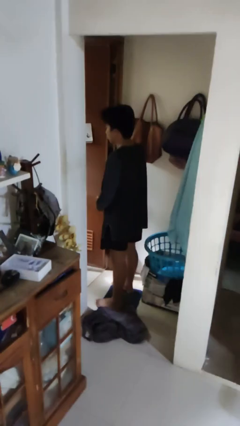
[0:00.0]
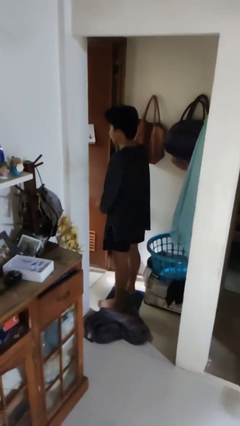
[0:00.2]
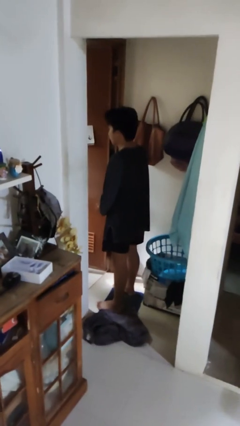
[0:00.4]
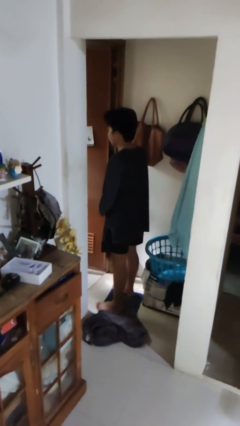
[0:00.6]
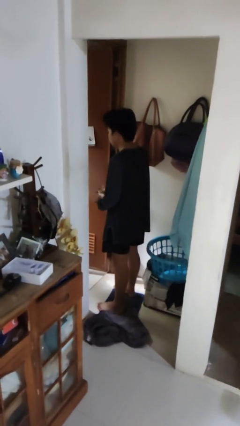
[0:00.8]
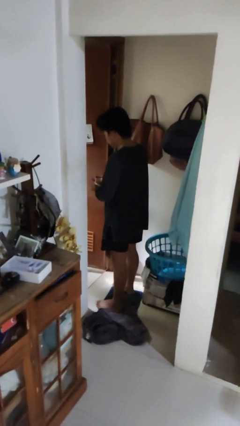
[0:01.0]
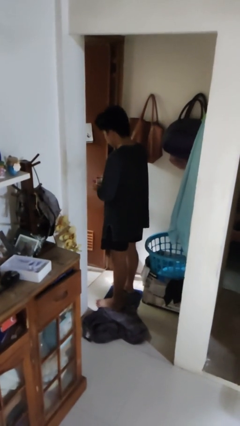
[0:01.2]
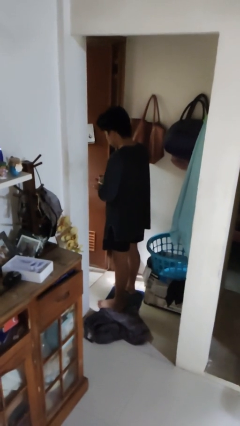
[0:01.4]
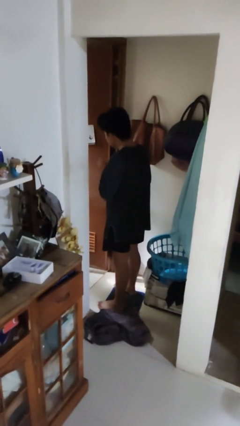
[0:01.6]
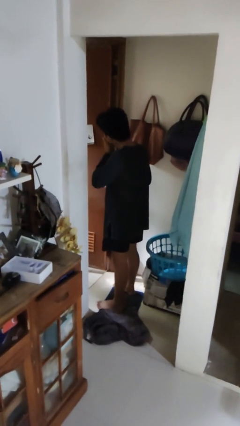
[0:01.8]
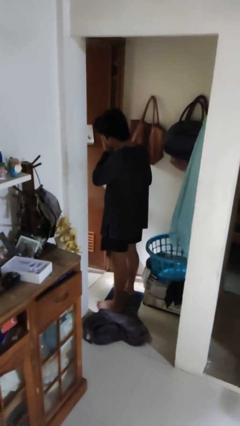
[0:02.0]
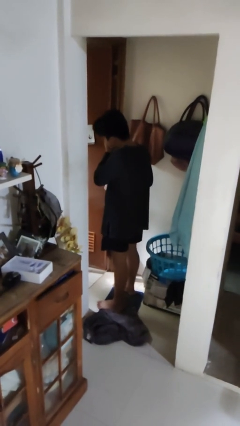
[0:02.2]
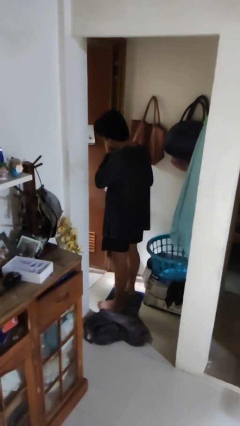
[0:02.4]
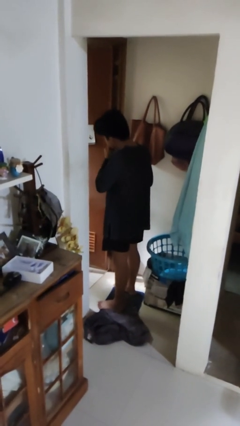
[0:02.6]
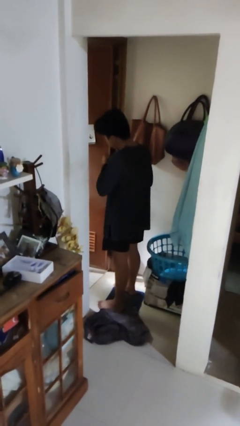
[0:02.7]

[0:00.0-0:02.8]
person applies shaving cream

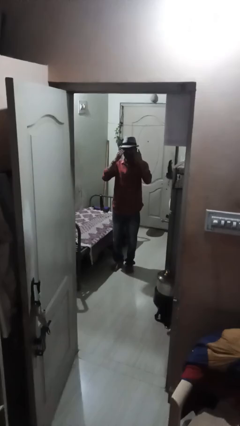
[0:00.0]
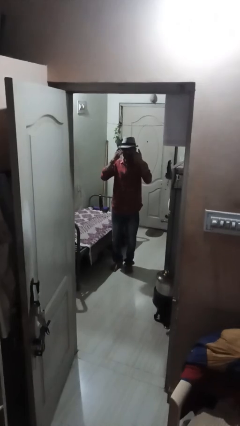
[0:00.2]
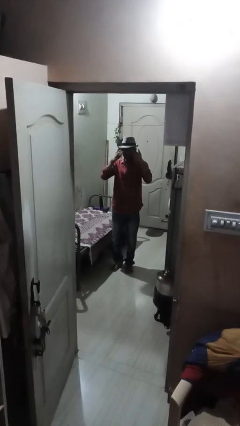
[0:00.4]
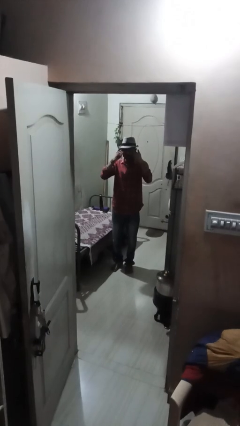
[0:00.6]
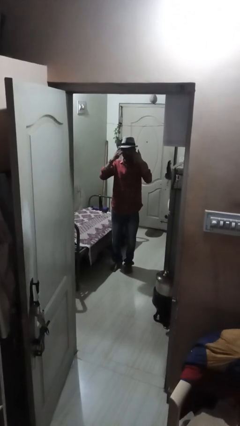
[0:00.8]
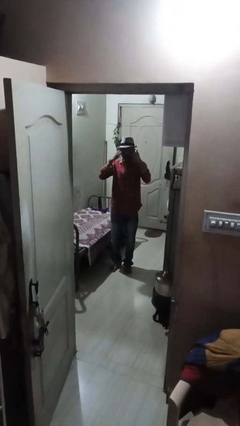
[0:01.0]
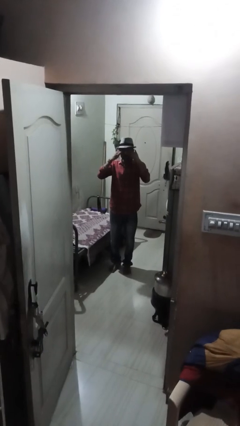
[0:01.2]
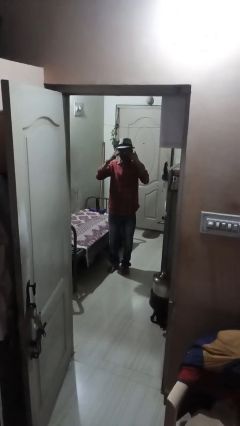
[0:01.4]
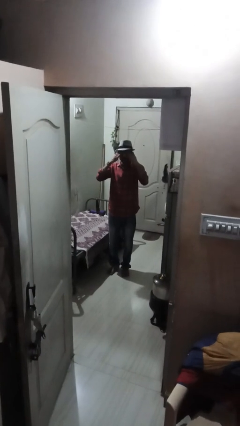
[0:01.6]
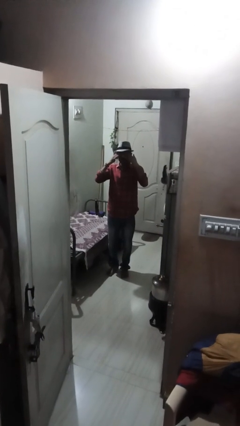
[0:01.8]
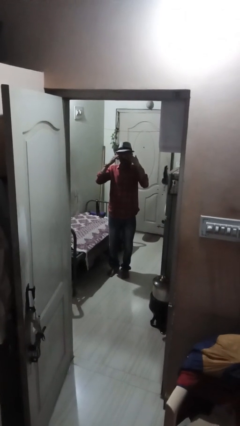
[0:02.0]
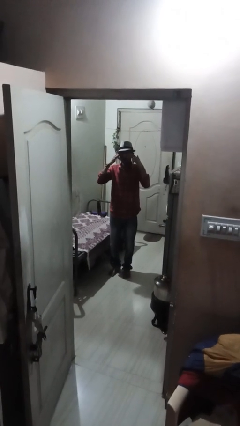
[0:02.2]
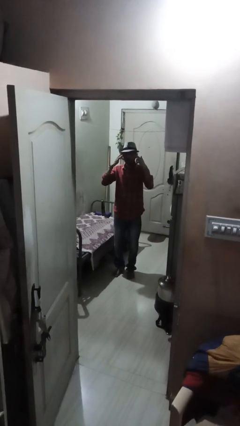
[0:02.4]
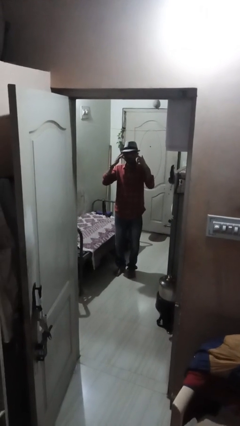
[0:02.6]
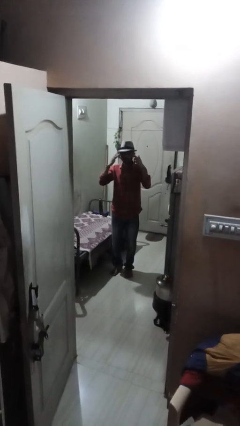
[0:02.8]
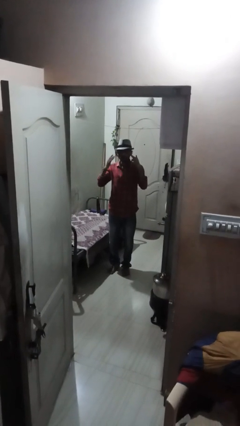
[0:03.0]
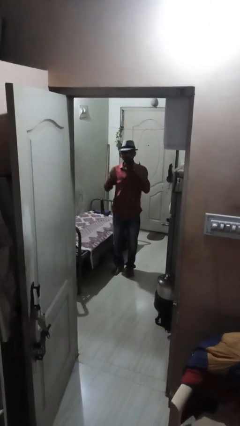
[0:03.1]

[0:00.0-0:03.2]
person rubs eyes

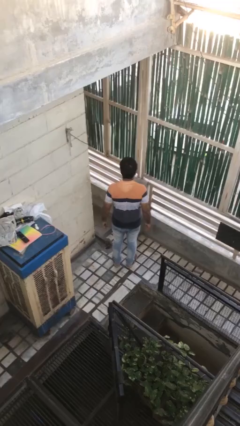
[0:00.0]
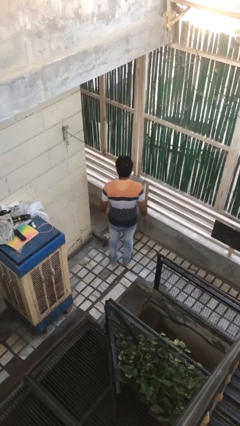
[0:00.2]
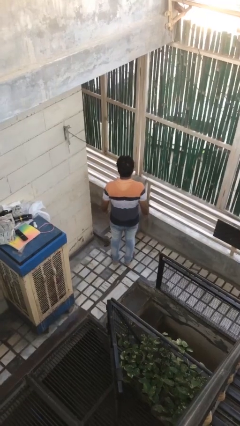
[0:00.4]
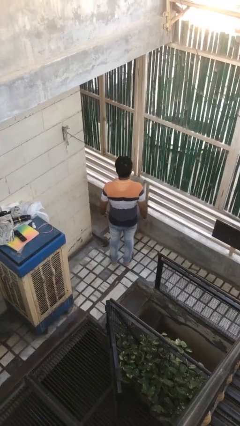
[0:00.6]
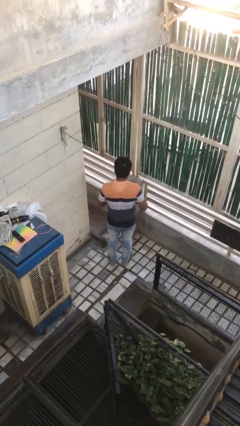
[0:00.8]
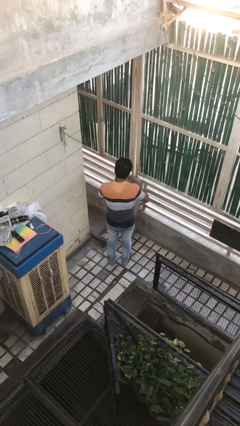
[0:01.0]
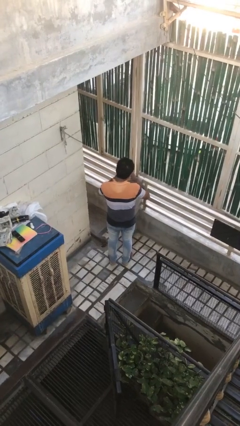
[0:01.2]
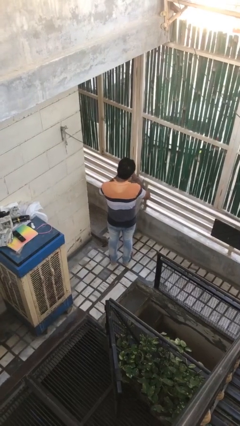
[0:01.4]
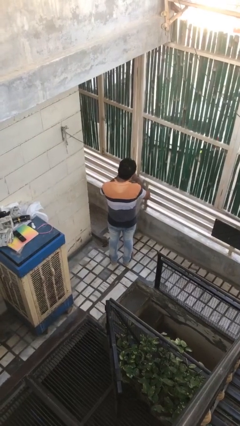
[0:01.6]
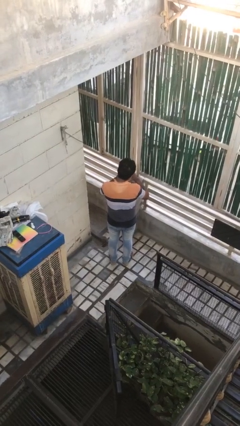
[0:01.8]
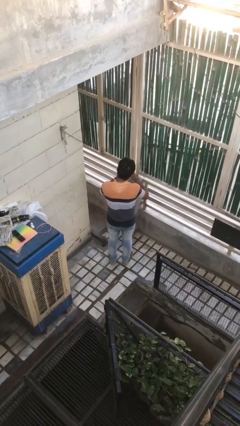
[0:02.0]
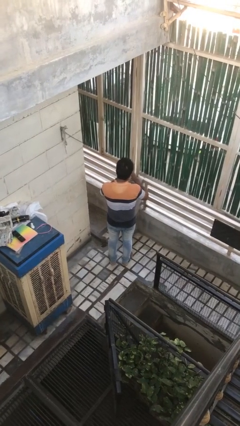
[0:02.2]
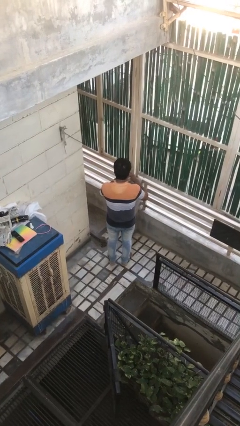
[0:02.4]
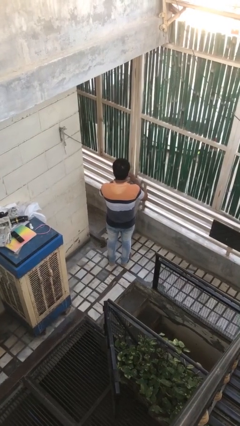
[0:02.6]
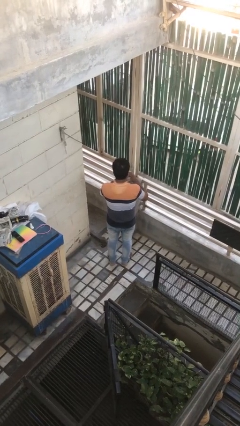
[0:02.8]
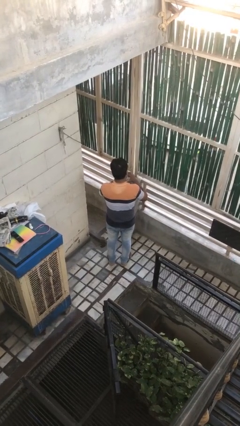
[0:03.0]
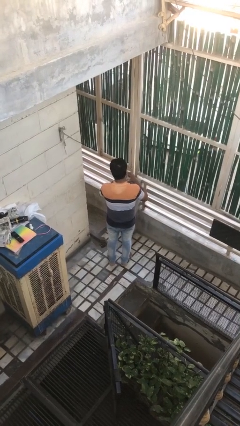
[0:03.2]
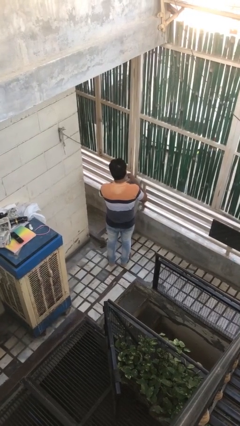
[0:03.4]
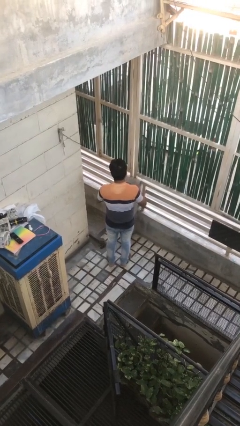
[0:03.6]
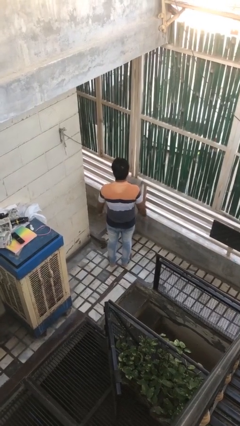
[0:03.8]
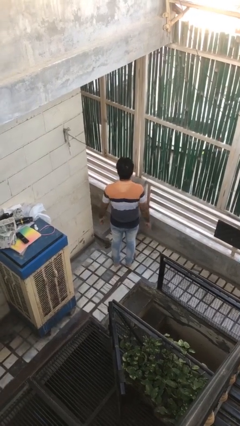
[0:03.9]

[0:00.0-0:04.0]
person files fingernails

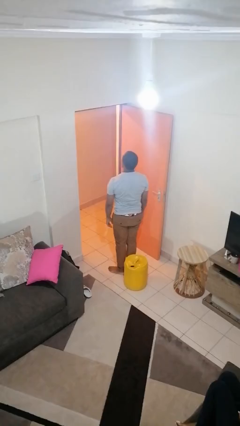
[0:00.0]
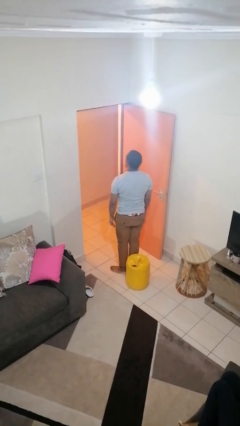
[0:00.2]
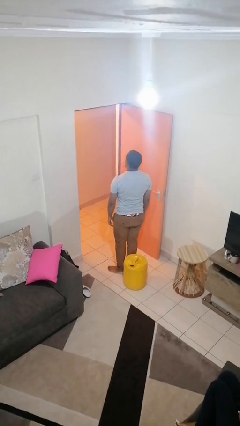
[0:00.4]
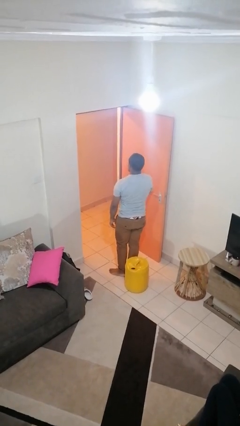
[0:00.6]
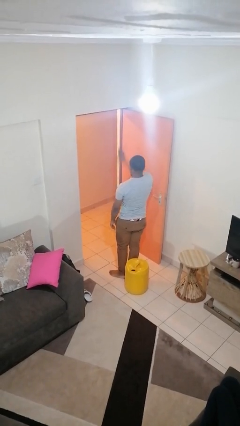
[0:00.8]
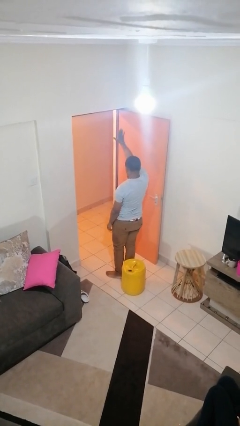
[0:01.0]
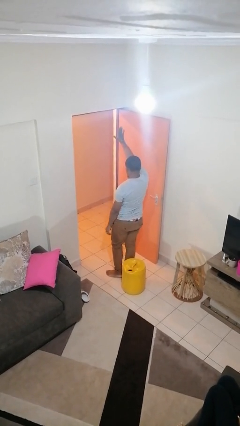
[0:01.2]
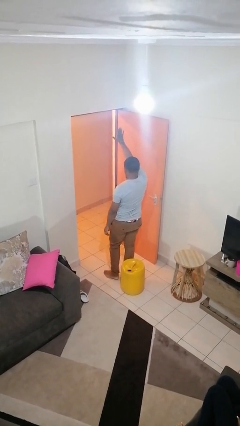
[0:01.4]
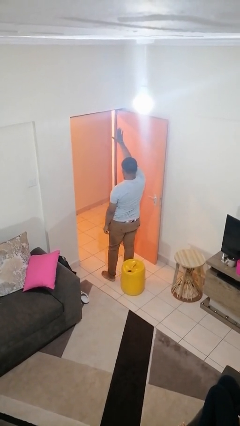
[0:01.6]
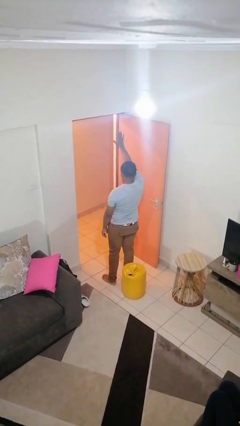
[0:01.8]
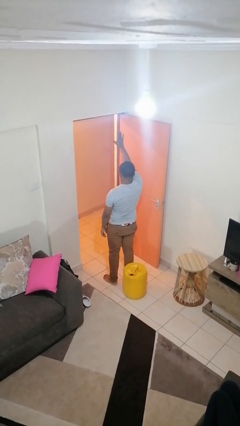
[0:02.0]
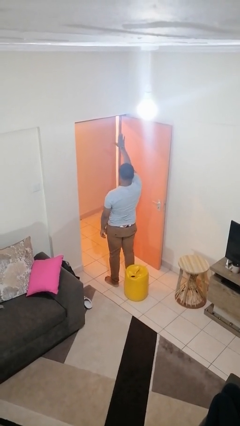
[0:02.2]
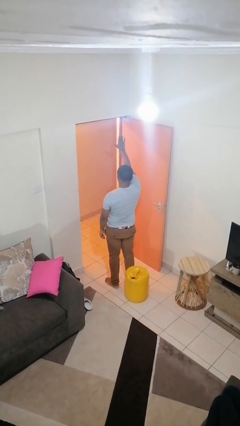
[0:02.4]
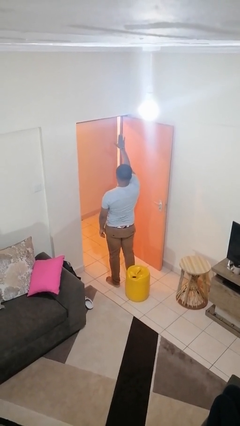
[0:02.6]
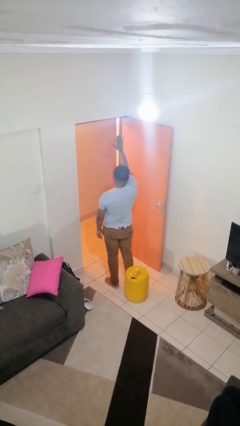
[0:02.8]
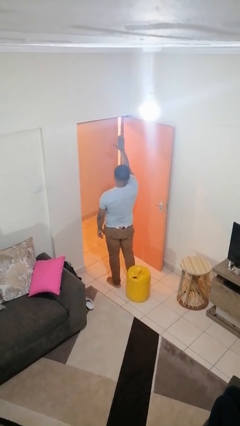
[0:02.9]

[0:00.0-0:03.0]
person gestures stop

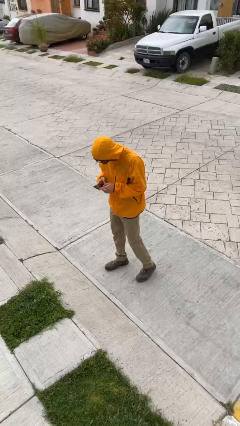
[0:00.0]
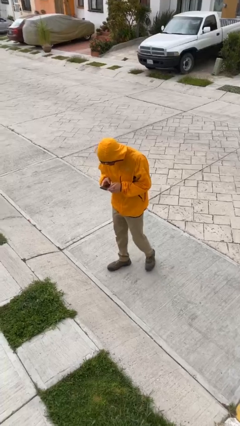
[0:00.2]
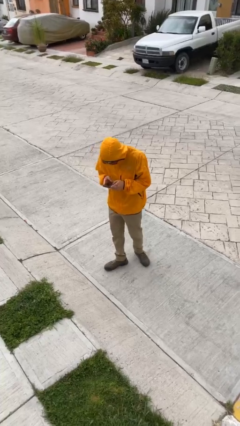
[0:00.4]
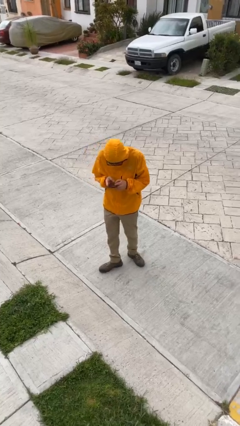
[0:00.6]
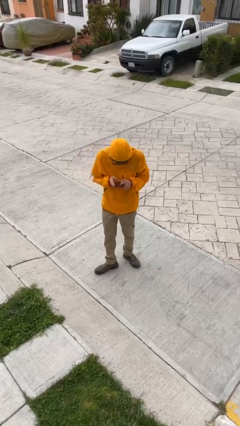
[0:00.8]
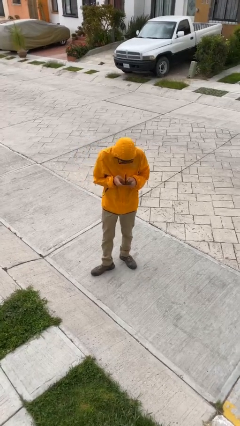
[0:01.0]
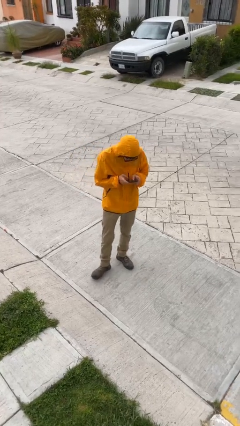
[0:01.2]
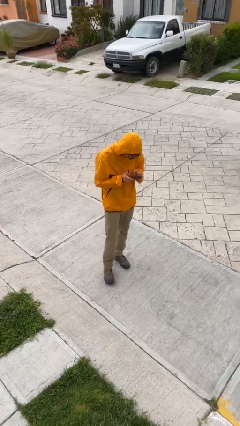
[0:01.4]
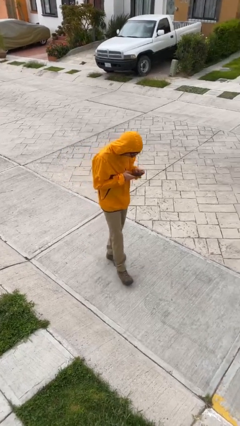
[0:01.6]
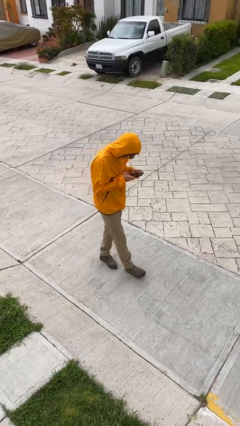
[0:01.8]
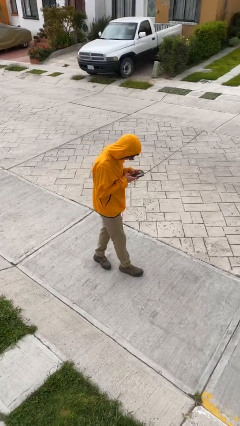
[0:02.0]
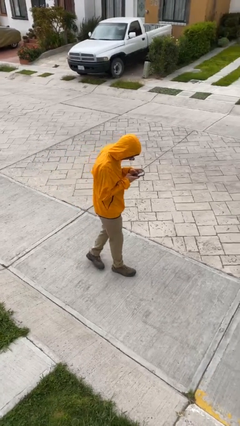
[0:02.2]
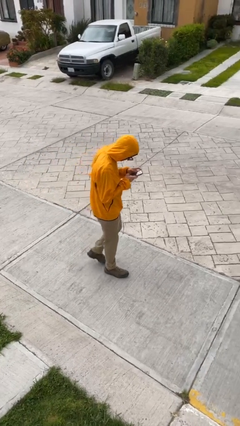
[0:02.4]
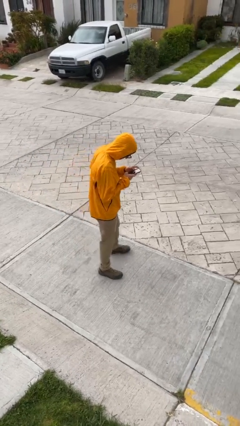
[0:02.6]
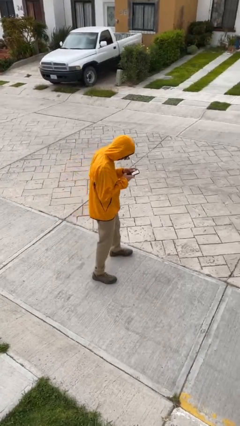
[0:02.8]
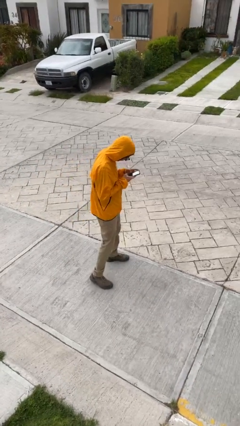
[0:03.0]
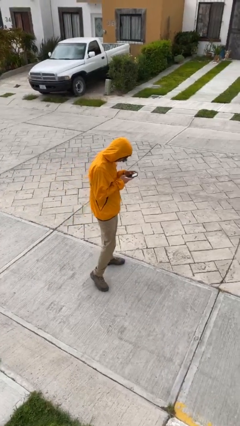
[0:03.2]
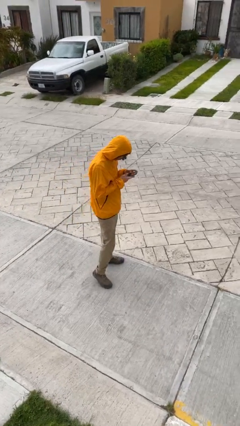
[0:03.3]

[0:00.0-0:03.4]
person texts on phone

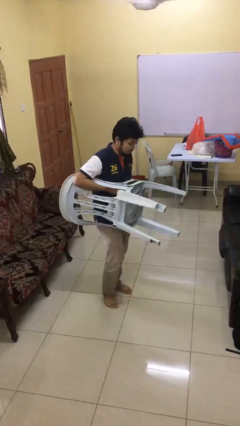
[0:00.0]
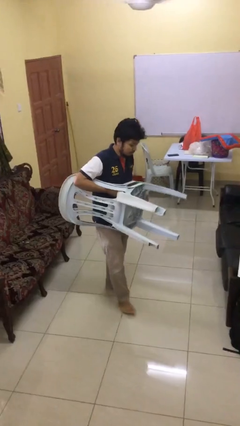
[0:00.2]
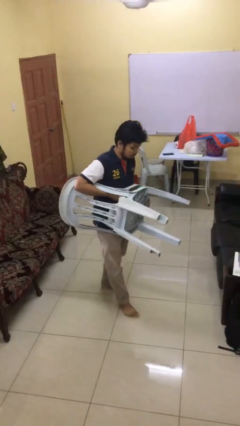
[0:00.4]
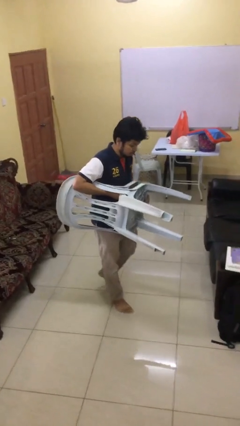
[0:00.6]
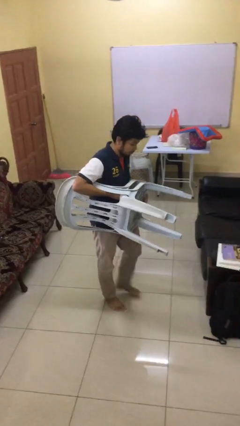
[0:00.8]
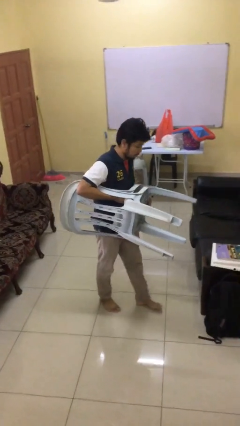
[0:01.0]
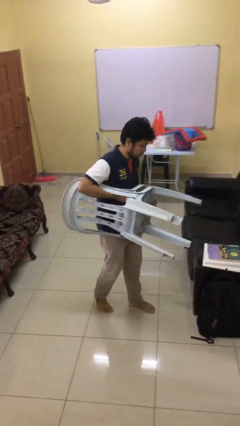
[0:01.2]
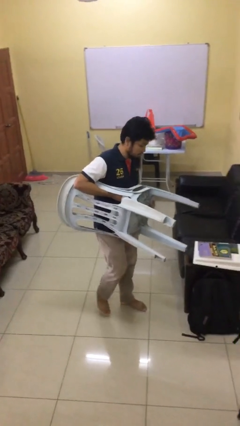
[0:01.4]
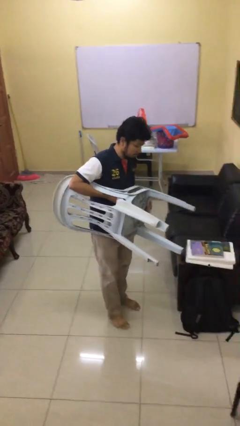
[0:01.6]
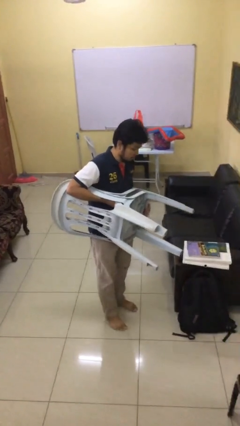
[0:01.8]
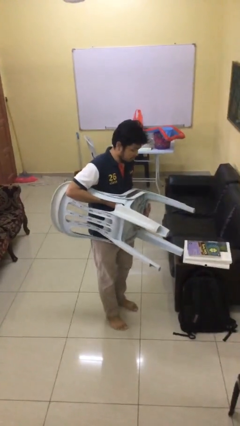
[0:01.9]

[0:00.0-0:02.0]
person carries furniture
